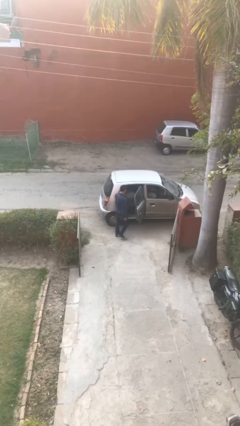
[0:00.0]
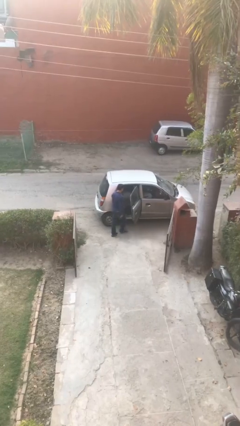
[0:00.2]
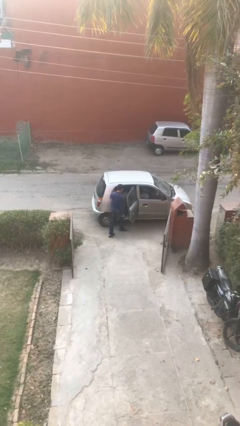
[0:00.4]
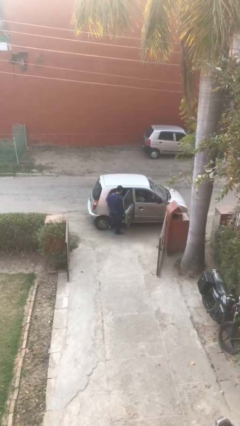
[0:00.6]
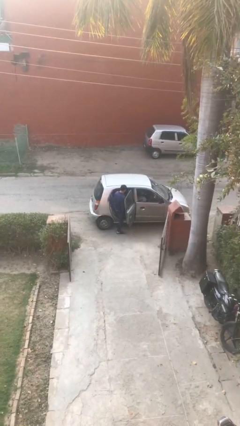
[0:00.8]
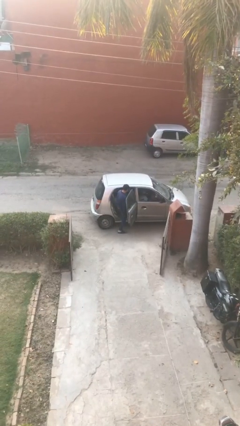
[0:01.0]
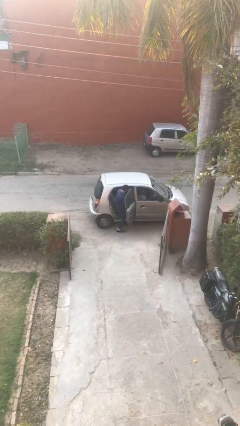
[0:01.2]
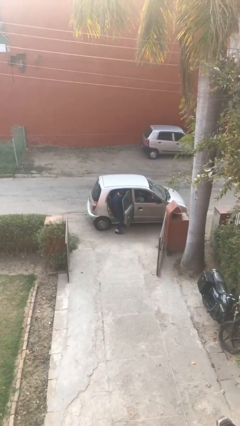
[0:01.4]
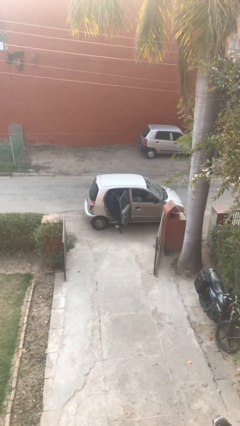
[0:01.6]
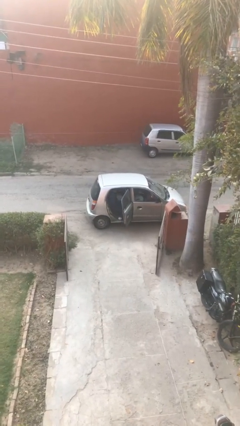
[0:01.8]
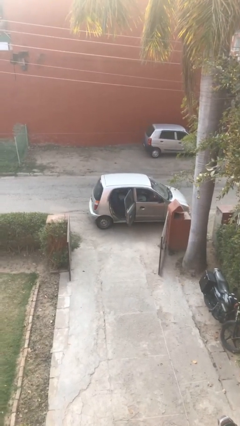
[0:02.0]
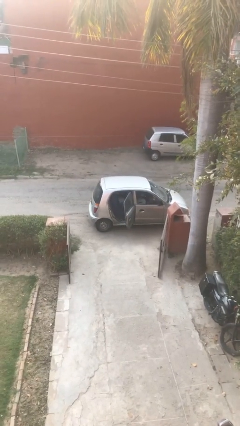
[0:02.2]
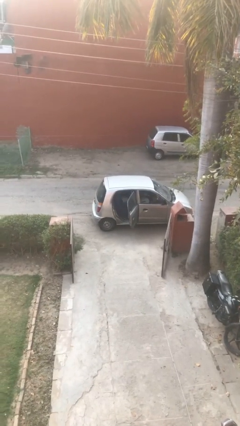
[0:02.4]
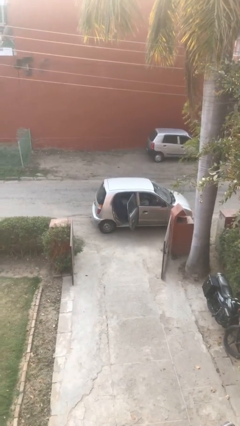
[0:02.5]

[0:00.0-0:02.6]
person enters car

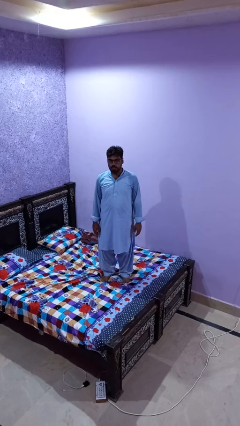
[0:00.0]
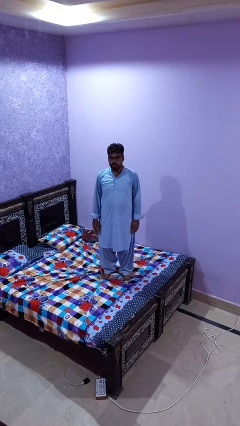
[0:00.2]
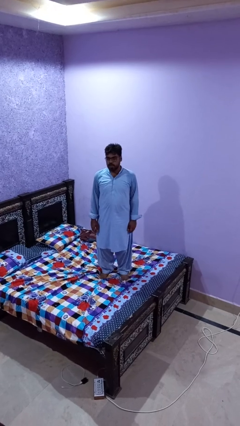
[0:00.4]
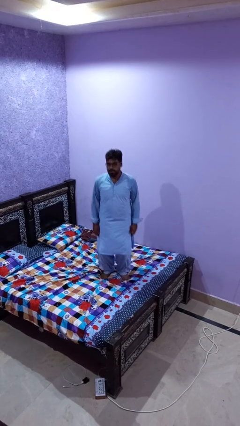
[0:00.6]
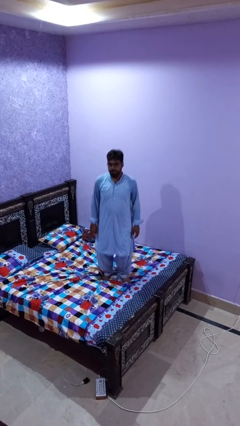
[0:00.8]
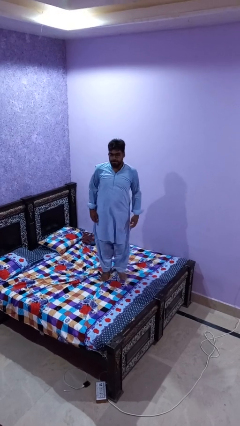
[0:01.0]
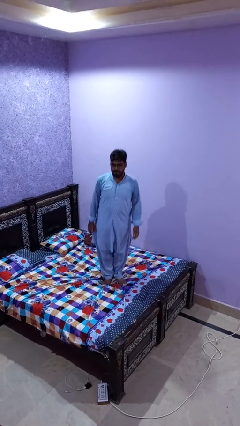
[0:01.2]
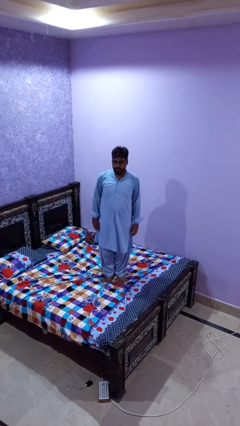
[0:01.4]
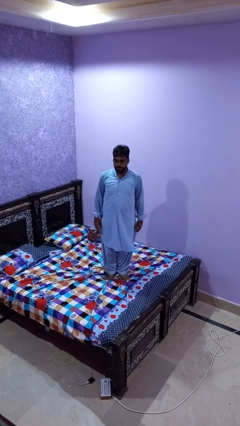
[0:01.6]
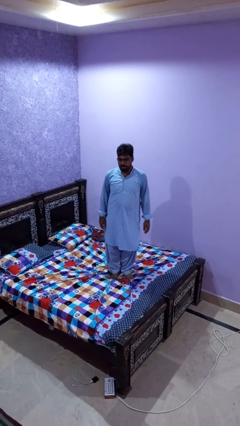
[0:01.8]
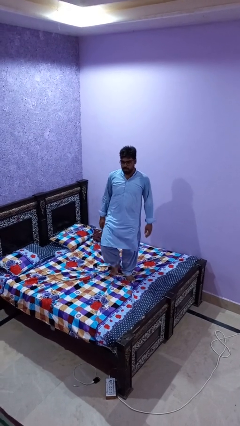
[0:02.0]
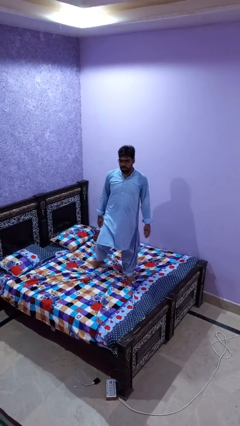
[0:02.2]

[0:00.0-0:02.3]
person jumps on bed

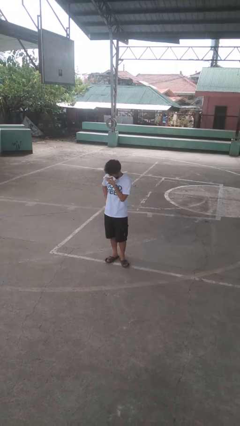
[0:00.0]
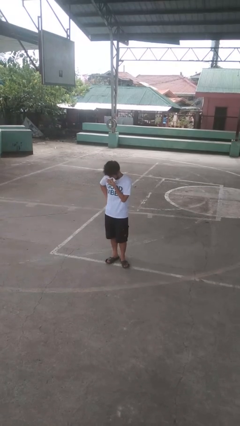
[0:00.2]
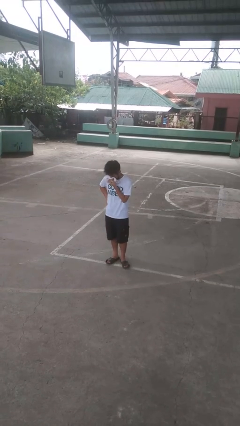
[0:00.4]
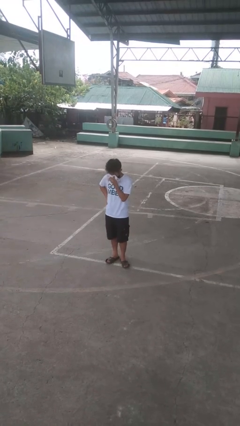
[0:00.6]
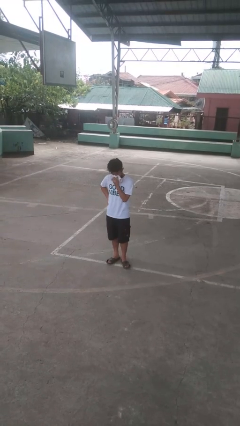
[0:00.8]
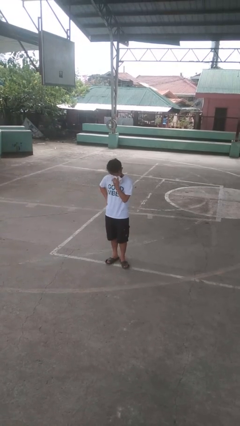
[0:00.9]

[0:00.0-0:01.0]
person blows nose

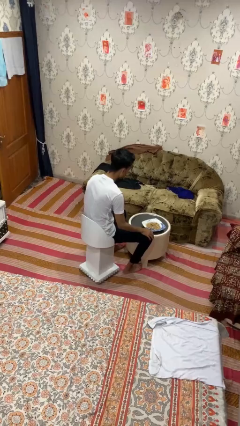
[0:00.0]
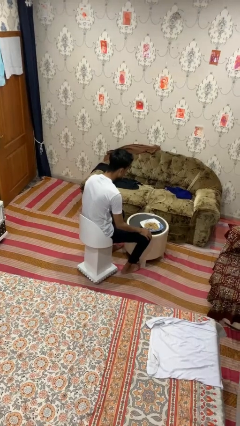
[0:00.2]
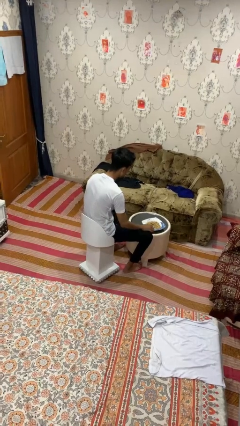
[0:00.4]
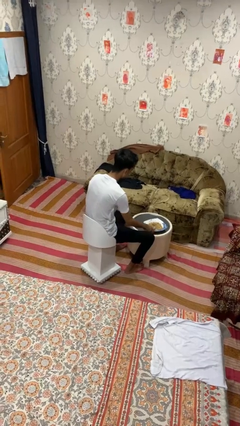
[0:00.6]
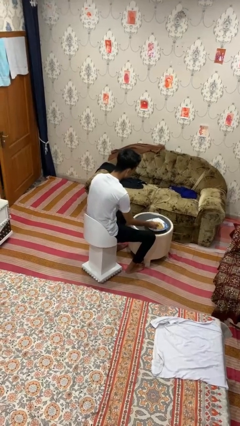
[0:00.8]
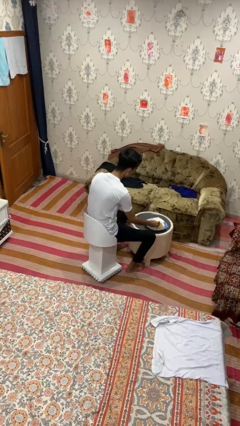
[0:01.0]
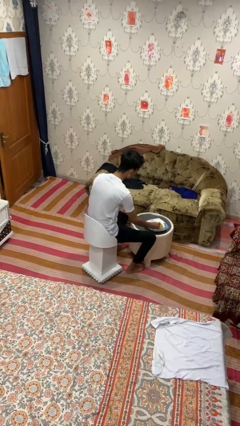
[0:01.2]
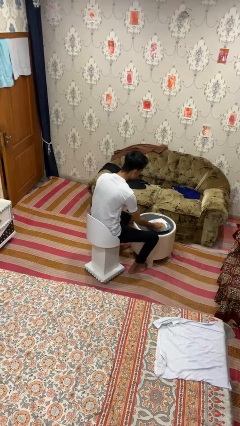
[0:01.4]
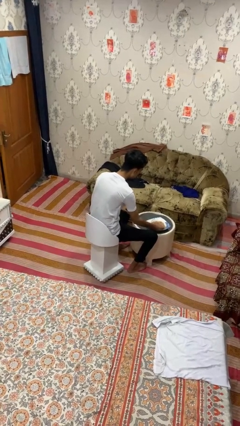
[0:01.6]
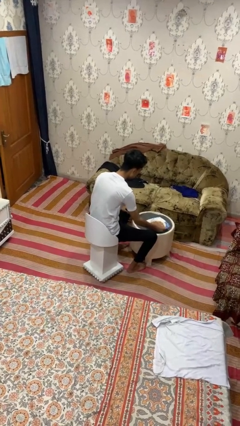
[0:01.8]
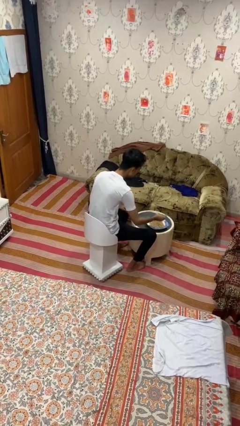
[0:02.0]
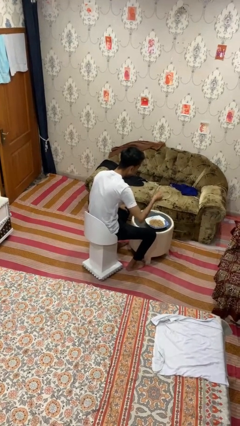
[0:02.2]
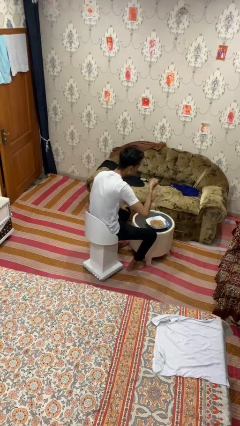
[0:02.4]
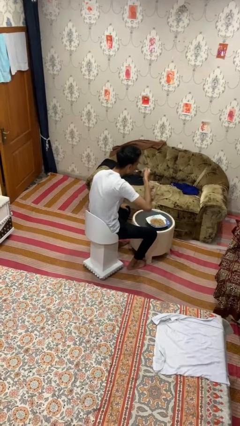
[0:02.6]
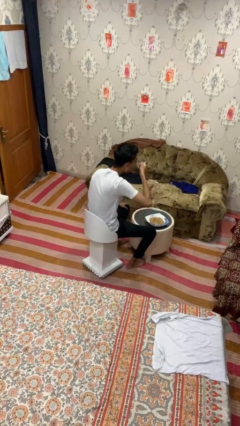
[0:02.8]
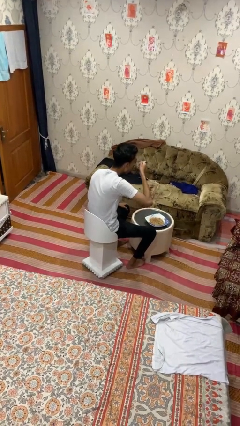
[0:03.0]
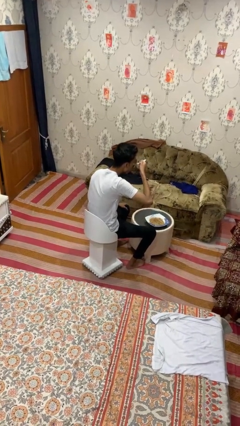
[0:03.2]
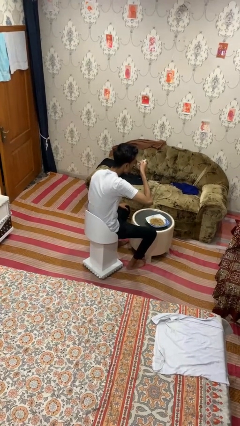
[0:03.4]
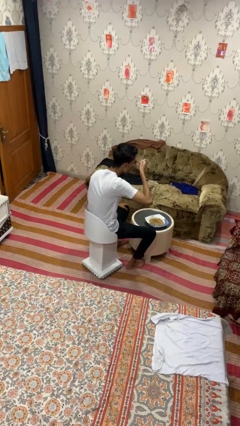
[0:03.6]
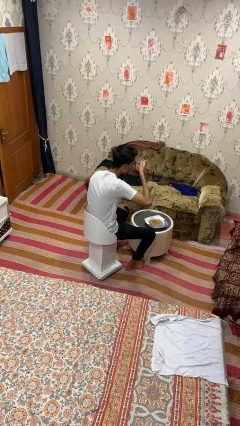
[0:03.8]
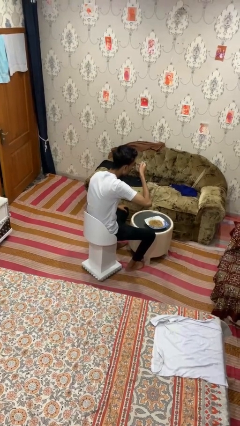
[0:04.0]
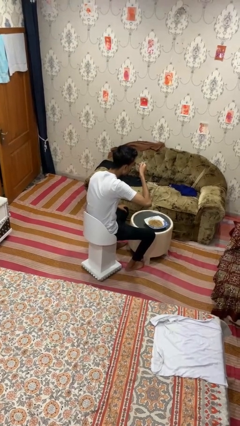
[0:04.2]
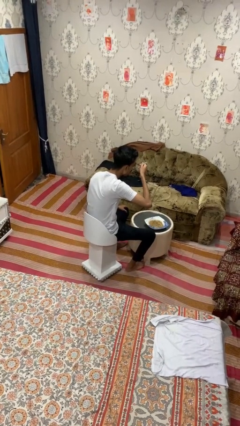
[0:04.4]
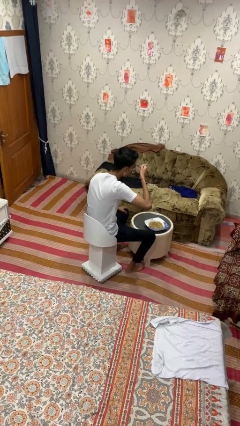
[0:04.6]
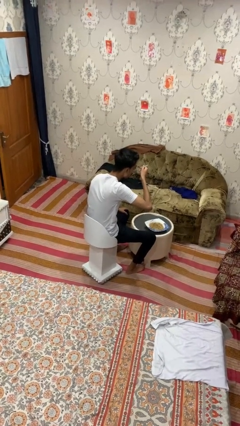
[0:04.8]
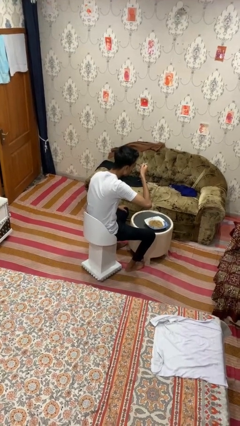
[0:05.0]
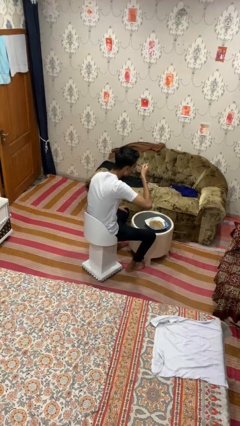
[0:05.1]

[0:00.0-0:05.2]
person eats with utensil

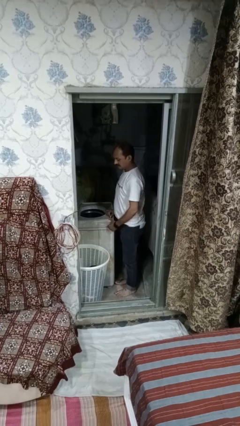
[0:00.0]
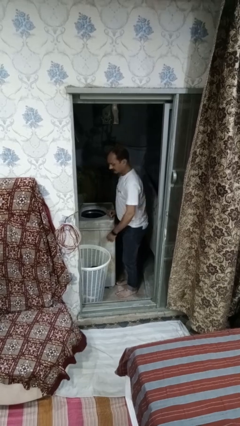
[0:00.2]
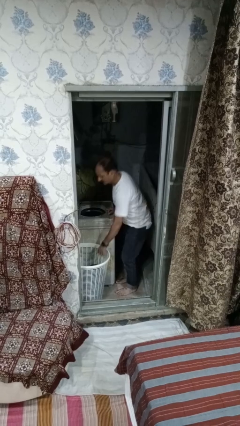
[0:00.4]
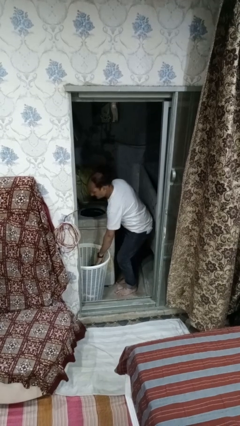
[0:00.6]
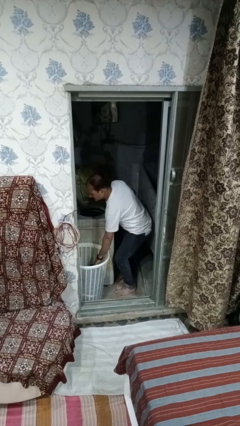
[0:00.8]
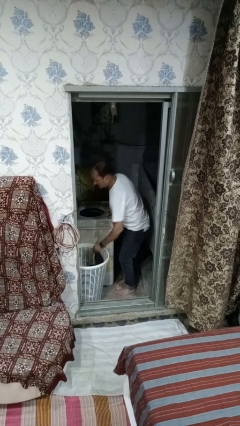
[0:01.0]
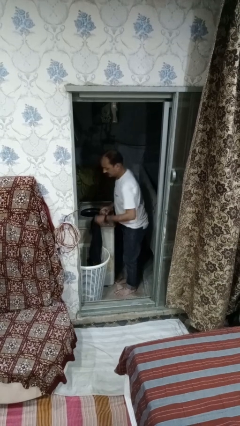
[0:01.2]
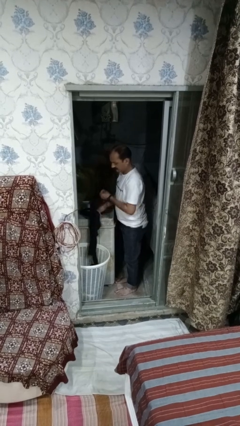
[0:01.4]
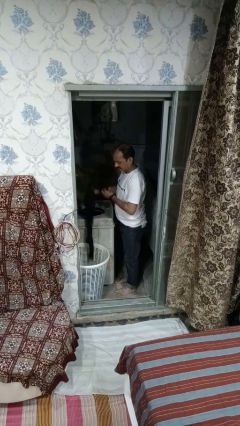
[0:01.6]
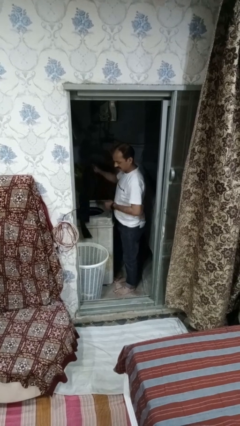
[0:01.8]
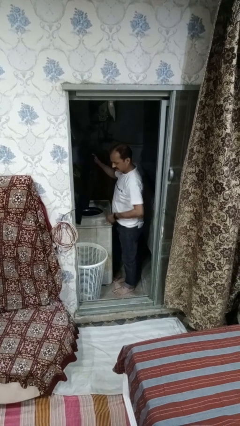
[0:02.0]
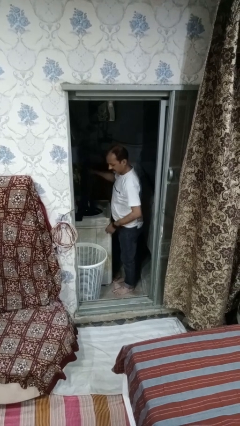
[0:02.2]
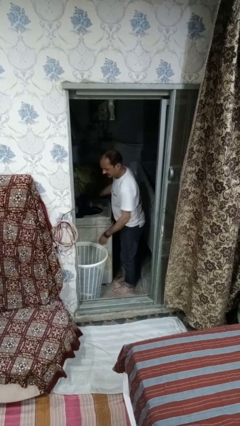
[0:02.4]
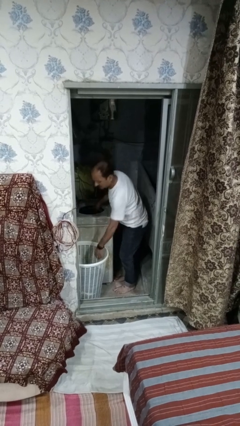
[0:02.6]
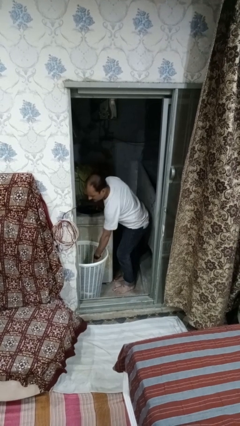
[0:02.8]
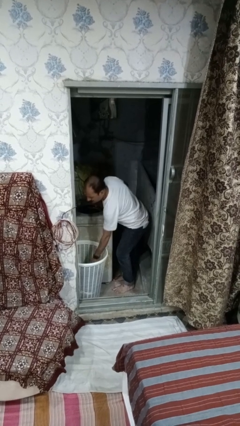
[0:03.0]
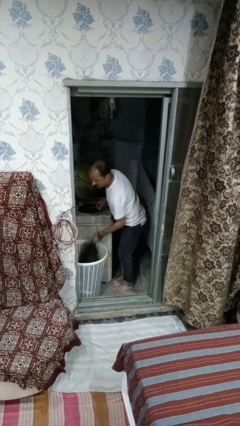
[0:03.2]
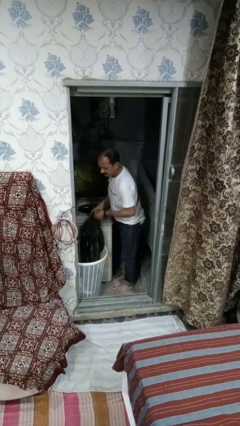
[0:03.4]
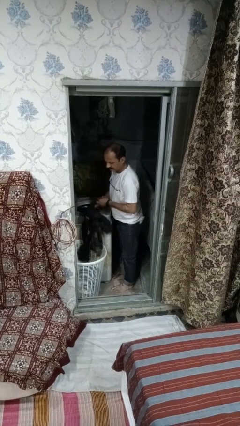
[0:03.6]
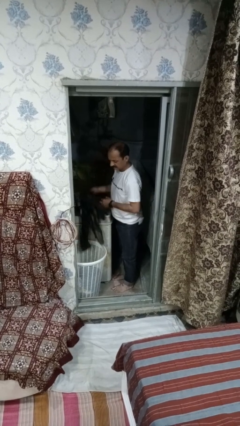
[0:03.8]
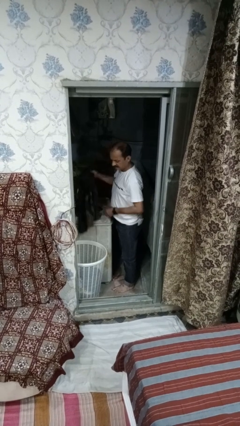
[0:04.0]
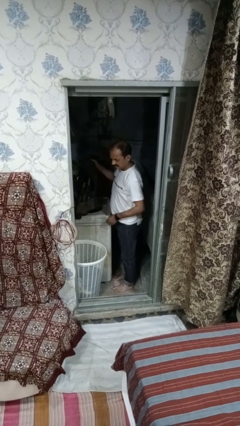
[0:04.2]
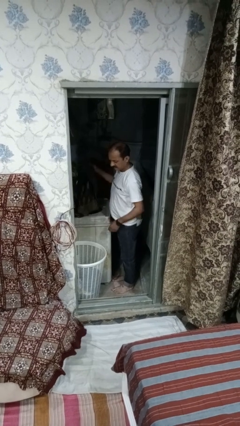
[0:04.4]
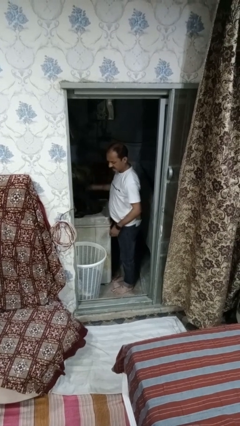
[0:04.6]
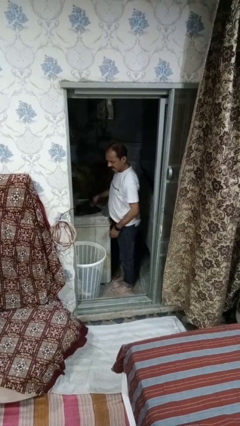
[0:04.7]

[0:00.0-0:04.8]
person loads dryer

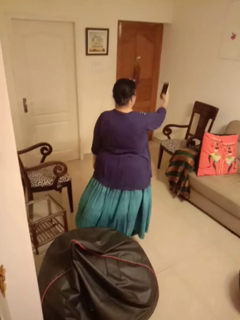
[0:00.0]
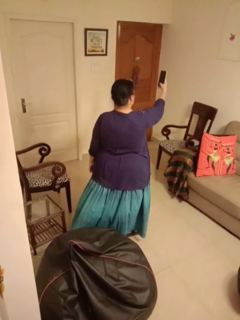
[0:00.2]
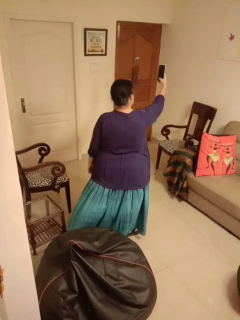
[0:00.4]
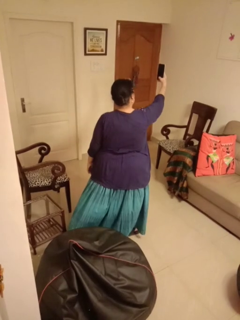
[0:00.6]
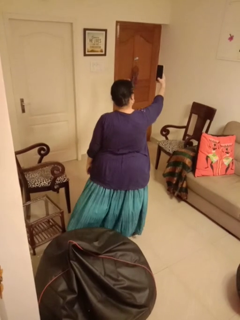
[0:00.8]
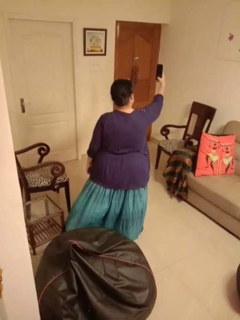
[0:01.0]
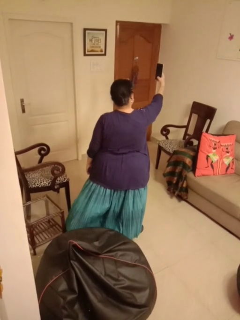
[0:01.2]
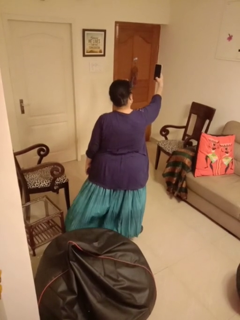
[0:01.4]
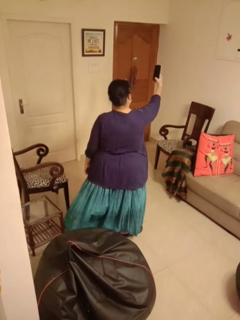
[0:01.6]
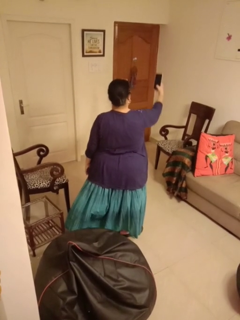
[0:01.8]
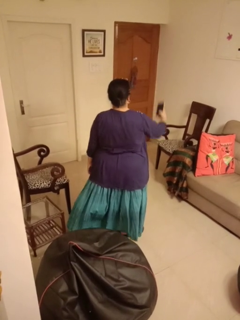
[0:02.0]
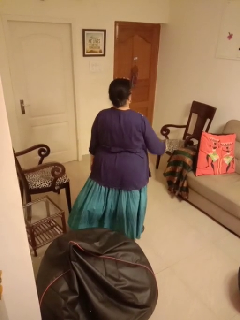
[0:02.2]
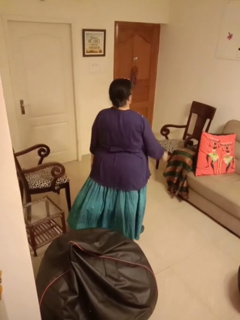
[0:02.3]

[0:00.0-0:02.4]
person takes selfie
